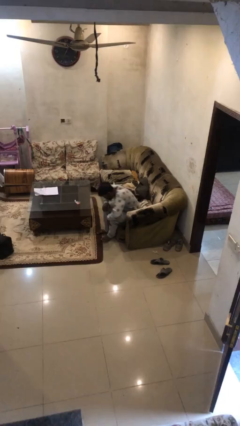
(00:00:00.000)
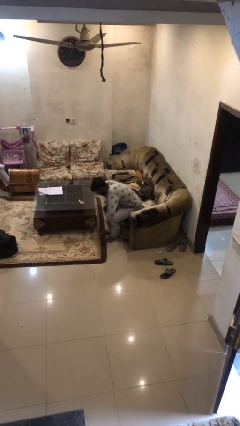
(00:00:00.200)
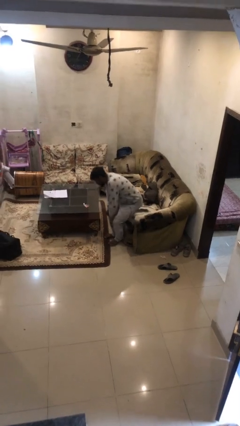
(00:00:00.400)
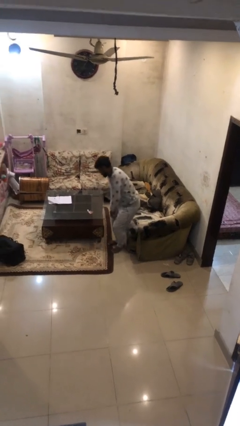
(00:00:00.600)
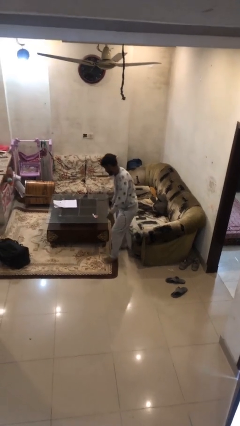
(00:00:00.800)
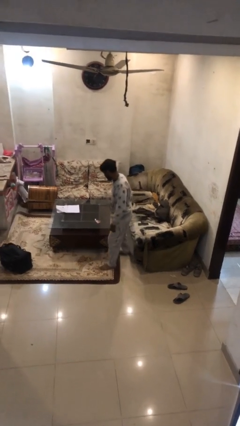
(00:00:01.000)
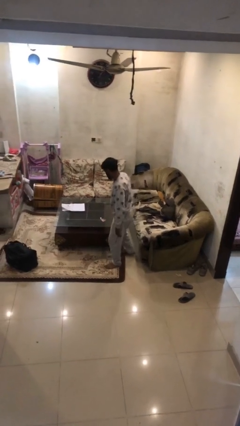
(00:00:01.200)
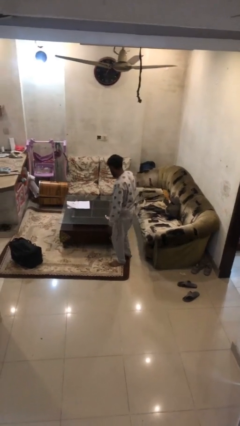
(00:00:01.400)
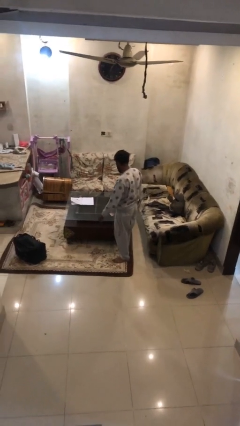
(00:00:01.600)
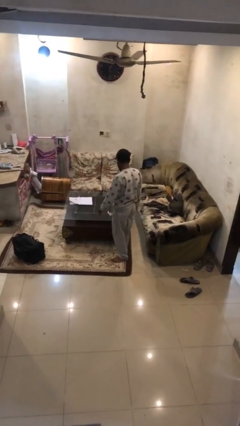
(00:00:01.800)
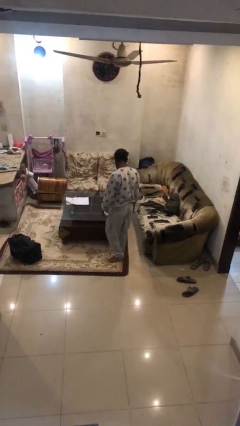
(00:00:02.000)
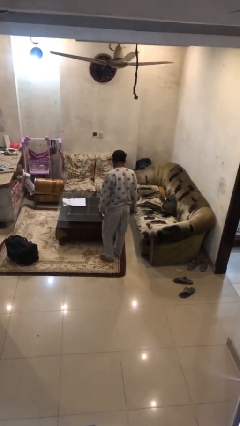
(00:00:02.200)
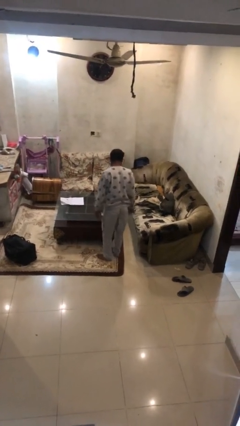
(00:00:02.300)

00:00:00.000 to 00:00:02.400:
person stands up

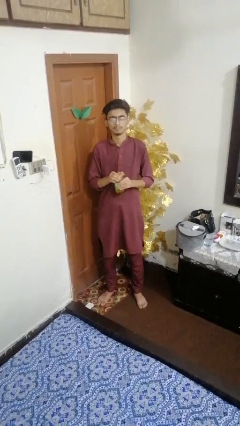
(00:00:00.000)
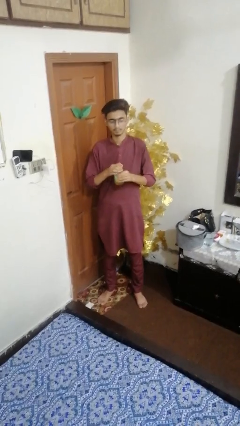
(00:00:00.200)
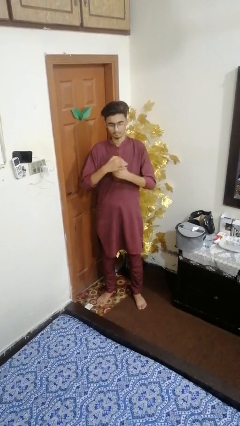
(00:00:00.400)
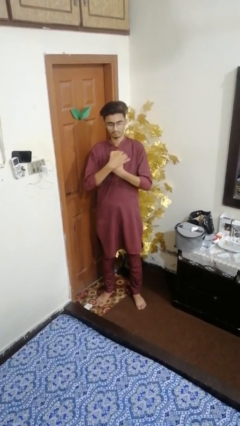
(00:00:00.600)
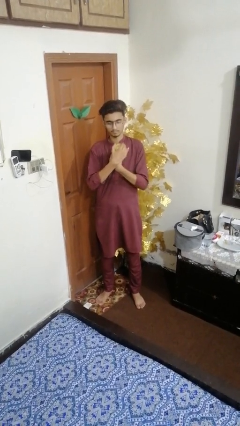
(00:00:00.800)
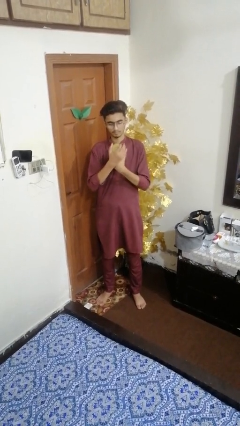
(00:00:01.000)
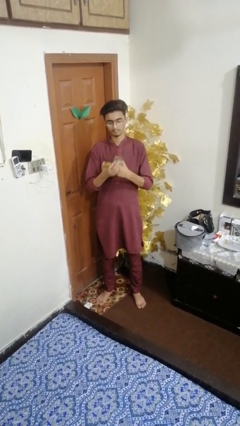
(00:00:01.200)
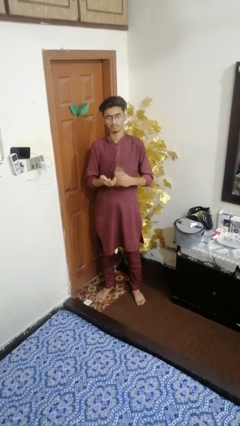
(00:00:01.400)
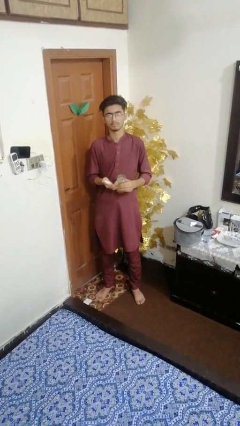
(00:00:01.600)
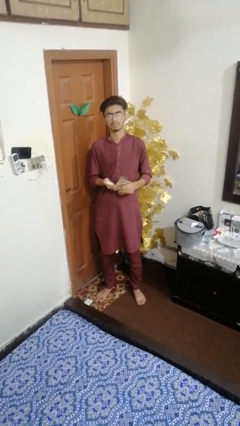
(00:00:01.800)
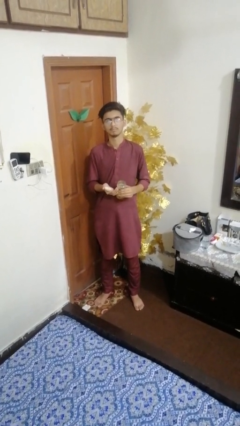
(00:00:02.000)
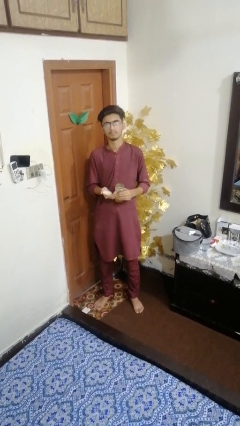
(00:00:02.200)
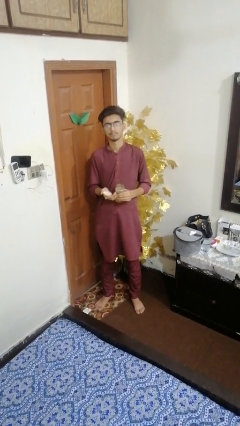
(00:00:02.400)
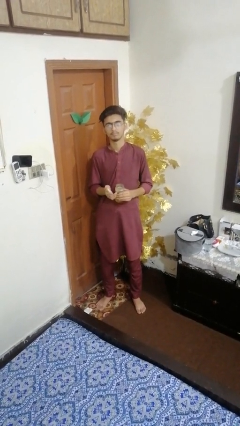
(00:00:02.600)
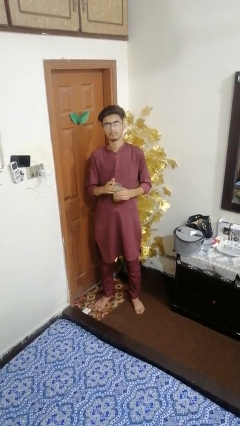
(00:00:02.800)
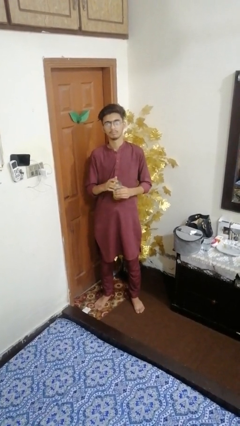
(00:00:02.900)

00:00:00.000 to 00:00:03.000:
person opens jar

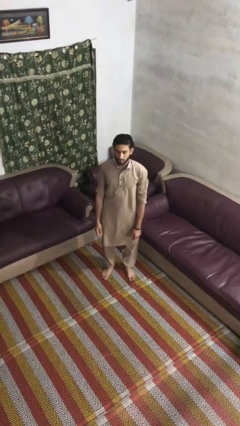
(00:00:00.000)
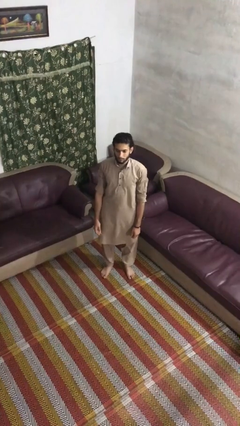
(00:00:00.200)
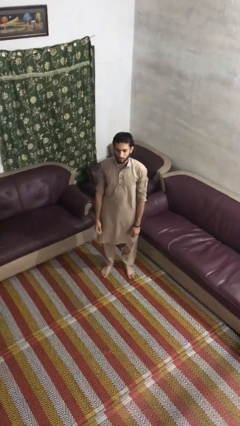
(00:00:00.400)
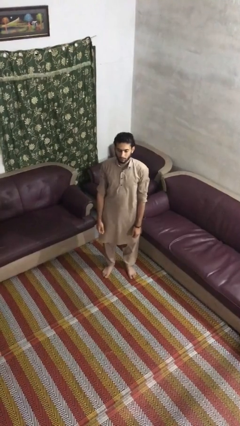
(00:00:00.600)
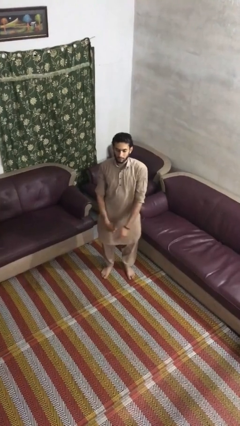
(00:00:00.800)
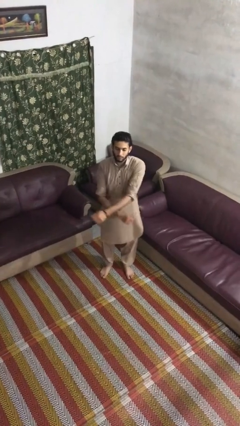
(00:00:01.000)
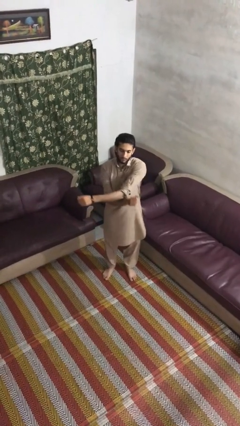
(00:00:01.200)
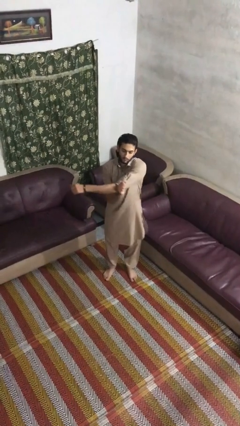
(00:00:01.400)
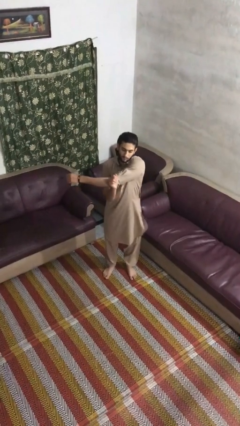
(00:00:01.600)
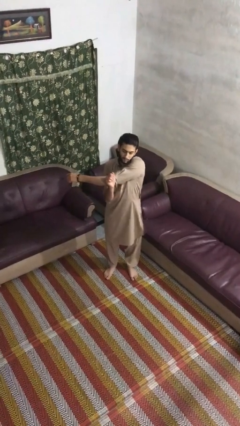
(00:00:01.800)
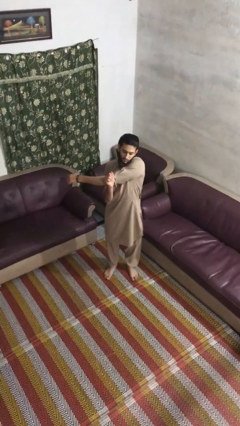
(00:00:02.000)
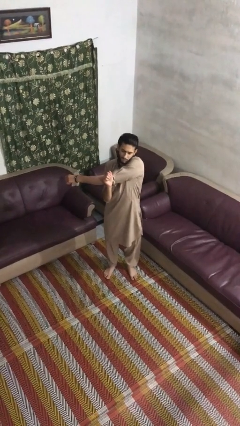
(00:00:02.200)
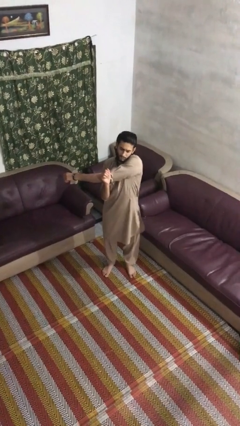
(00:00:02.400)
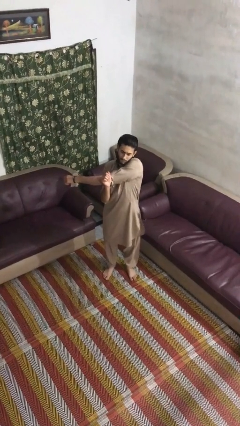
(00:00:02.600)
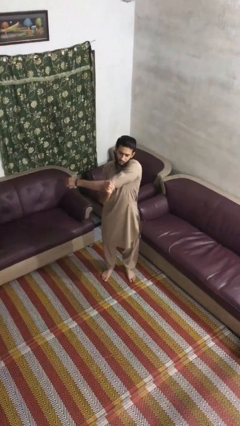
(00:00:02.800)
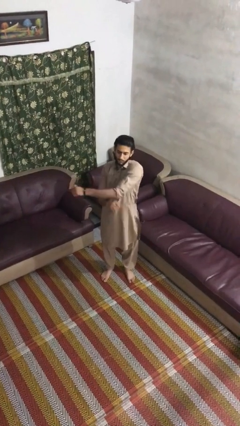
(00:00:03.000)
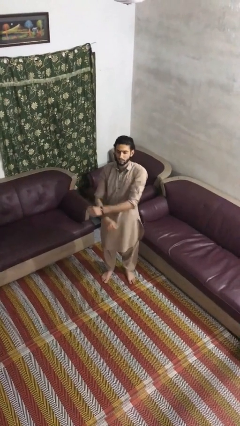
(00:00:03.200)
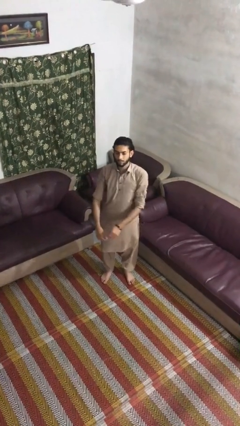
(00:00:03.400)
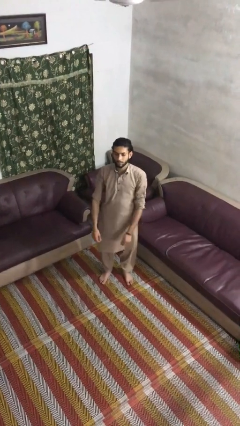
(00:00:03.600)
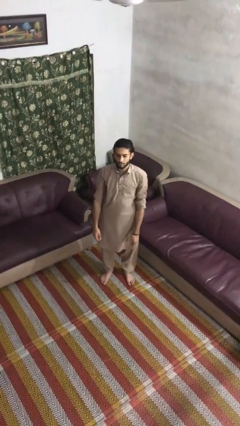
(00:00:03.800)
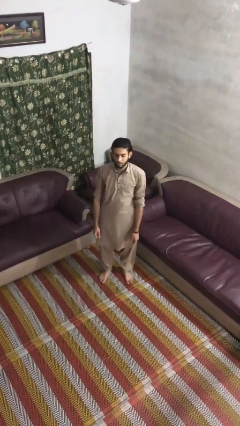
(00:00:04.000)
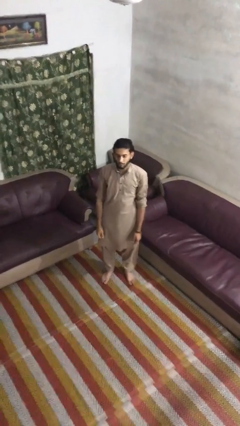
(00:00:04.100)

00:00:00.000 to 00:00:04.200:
person stretches arms to side

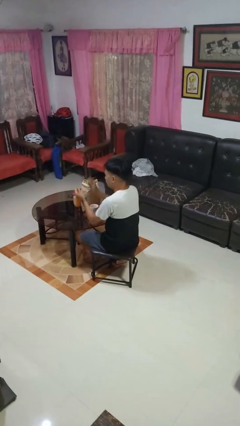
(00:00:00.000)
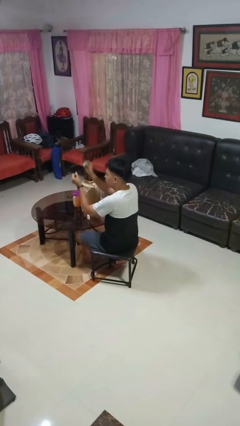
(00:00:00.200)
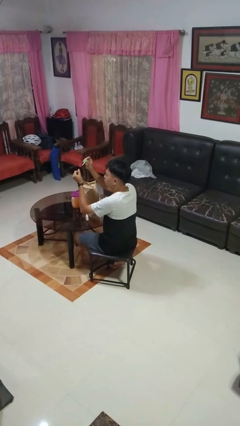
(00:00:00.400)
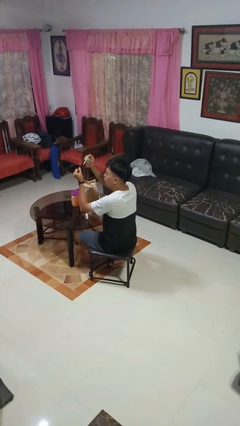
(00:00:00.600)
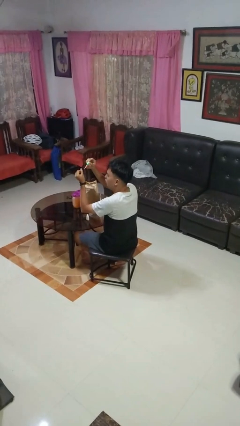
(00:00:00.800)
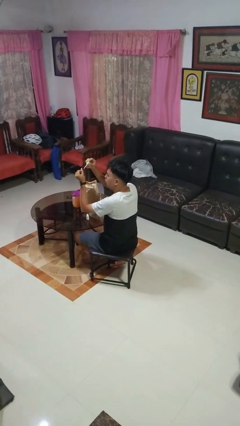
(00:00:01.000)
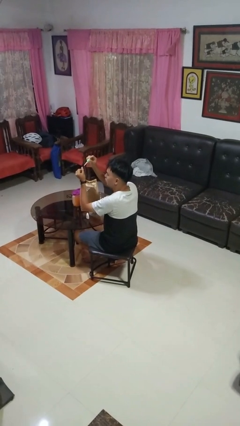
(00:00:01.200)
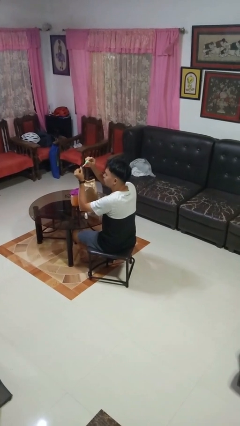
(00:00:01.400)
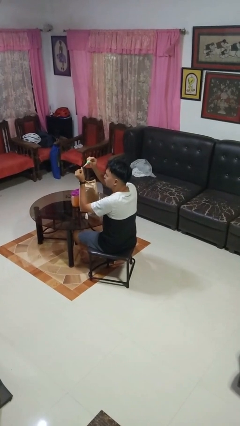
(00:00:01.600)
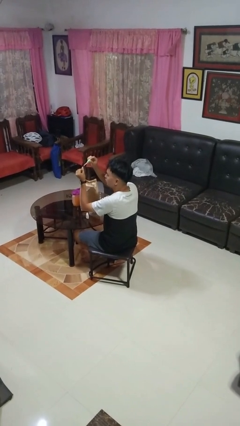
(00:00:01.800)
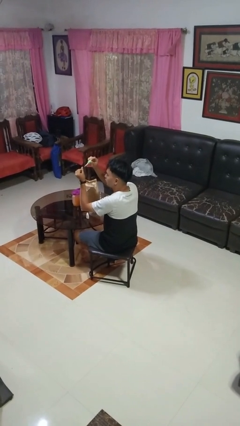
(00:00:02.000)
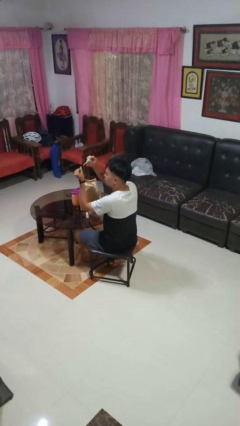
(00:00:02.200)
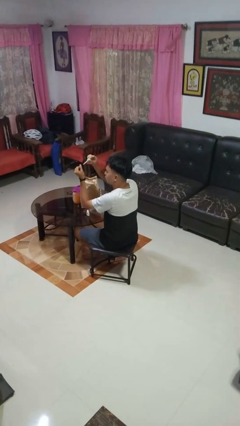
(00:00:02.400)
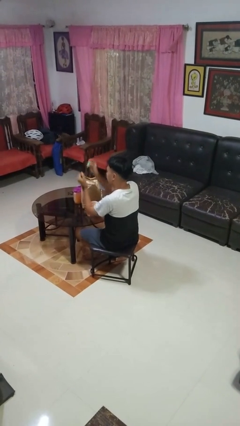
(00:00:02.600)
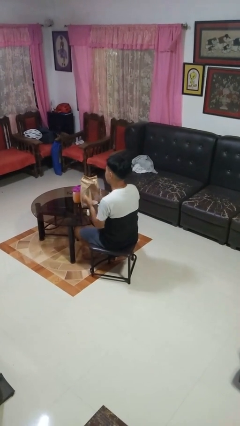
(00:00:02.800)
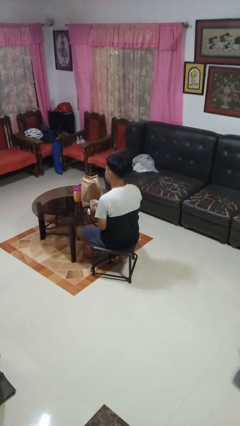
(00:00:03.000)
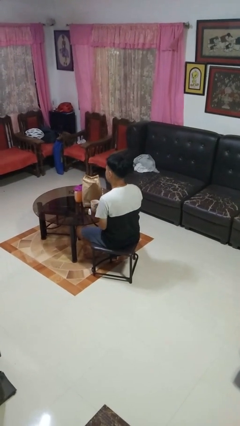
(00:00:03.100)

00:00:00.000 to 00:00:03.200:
person paints fingernails

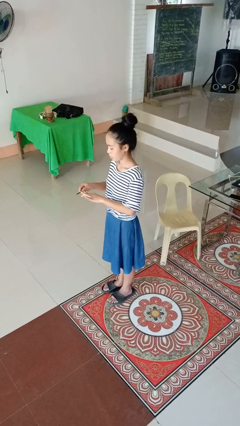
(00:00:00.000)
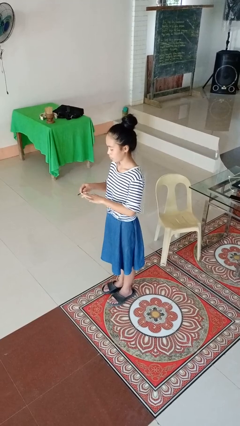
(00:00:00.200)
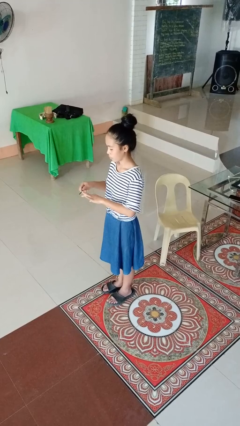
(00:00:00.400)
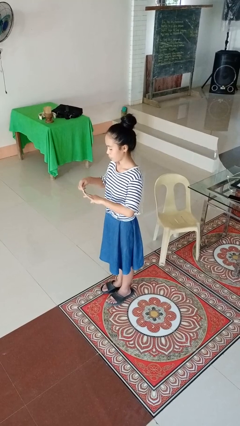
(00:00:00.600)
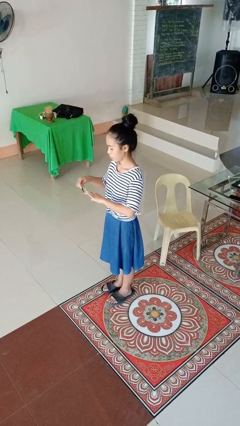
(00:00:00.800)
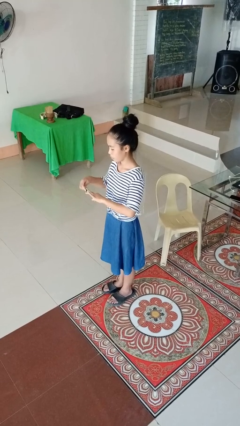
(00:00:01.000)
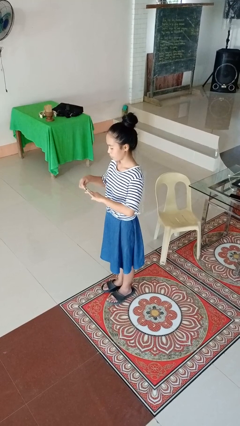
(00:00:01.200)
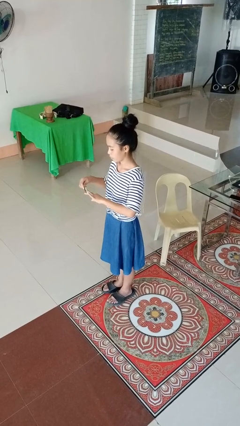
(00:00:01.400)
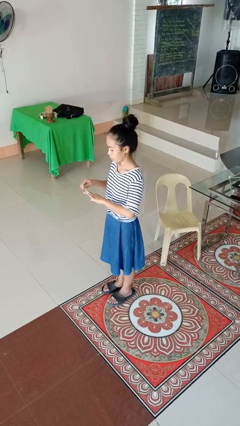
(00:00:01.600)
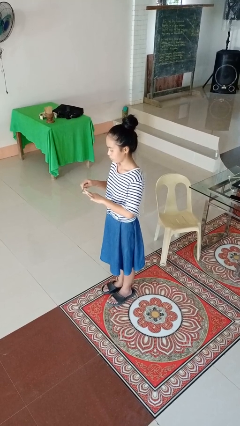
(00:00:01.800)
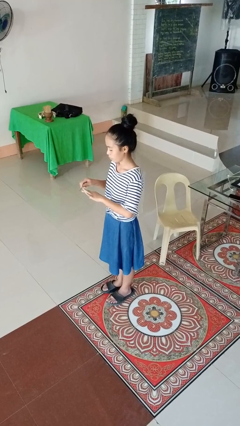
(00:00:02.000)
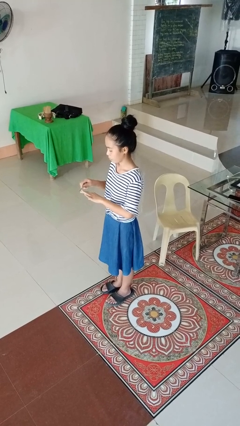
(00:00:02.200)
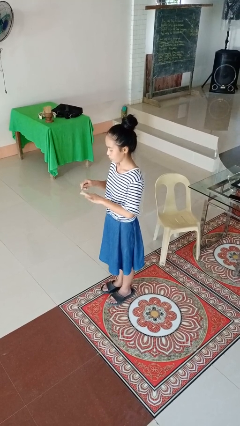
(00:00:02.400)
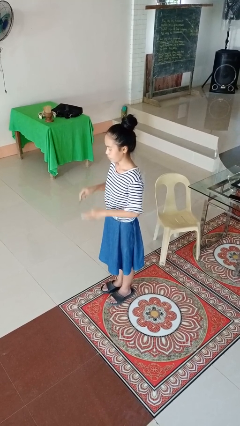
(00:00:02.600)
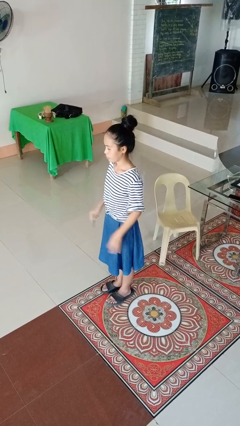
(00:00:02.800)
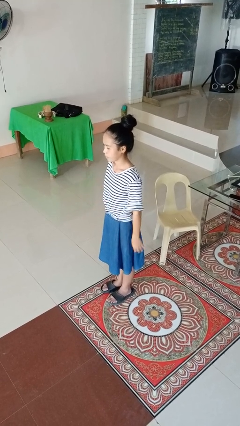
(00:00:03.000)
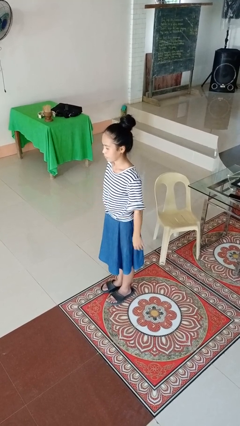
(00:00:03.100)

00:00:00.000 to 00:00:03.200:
person files fingernails

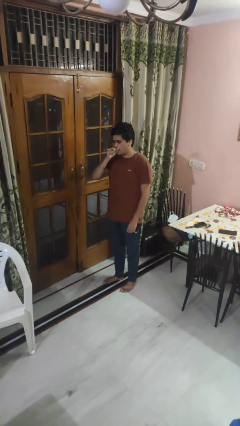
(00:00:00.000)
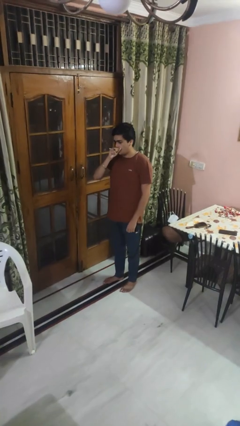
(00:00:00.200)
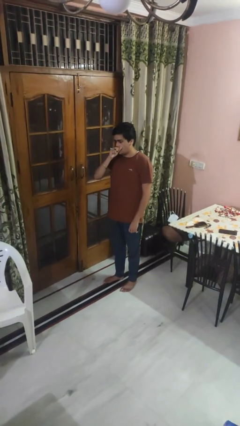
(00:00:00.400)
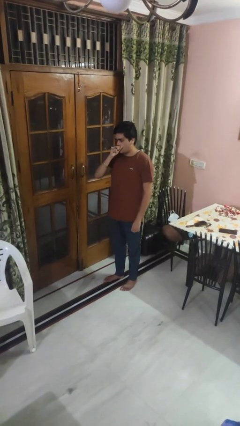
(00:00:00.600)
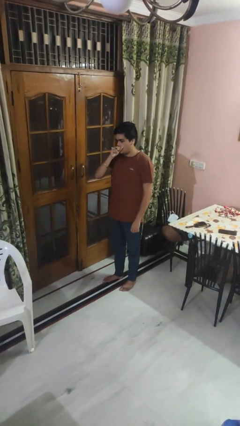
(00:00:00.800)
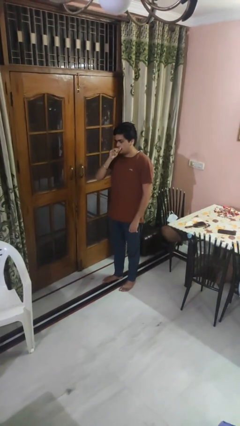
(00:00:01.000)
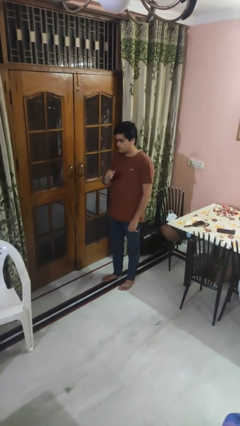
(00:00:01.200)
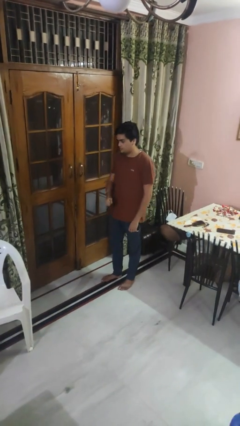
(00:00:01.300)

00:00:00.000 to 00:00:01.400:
person vapes

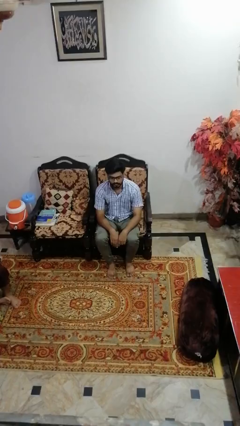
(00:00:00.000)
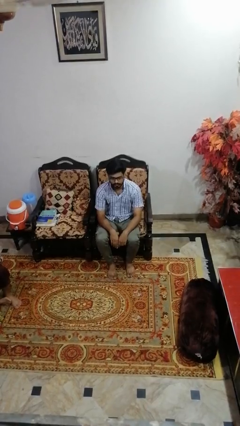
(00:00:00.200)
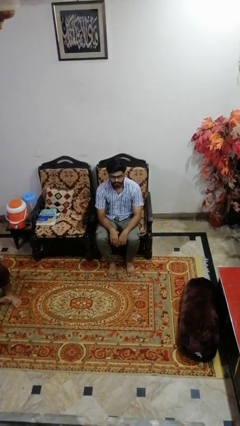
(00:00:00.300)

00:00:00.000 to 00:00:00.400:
person scratches face
